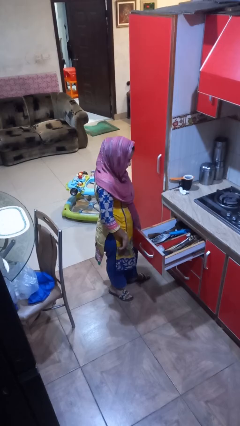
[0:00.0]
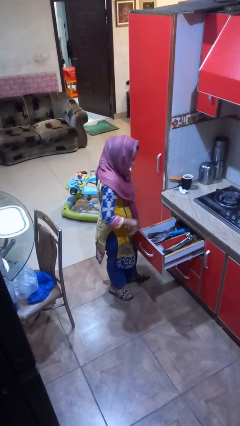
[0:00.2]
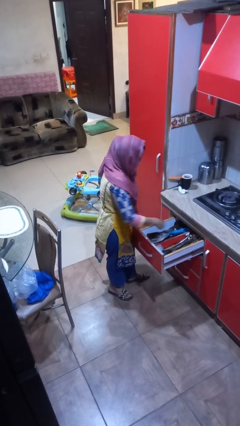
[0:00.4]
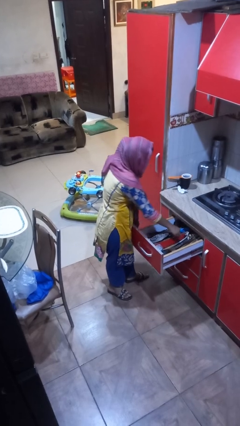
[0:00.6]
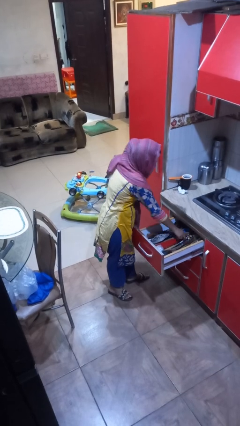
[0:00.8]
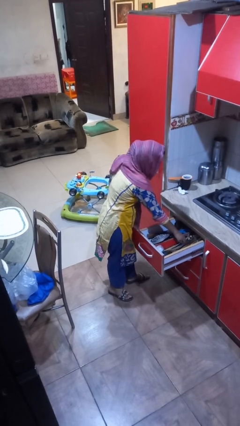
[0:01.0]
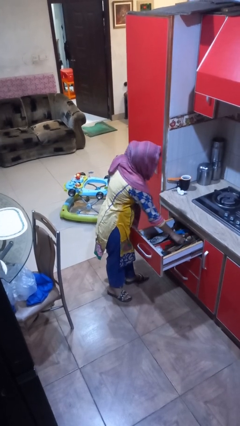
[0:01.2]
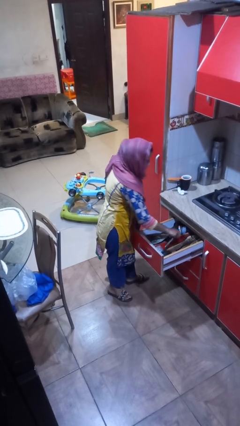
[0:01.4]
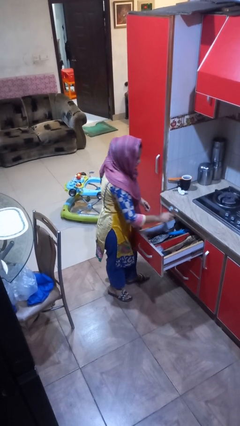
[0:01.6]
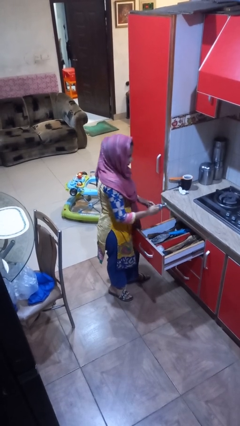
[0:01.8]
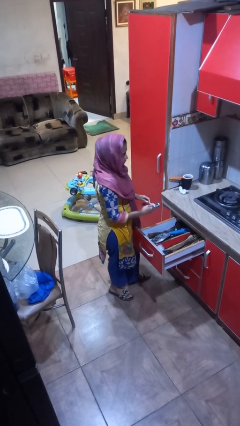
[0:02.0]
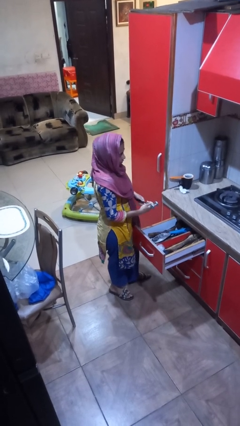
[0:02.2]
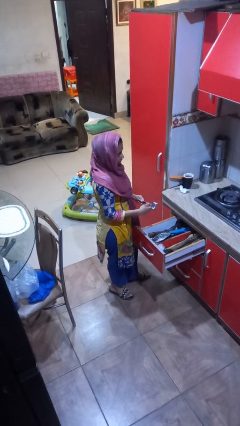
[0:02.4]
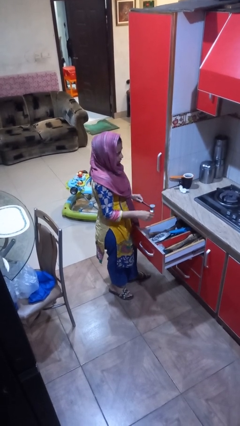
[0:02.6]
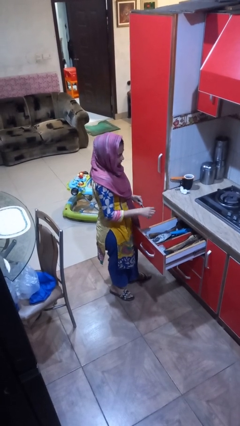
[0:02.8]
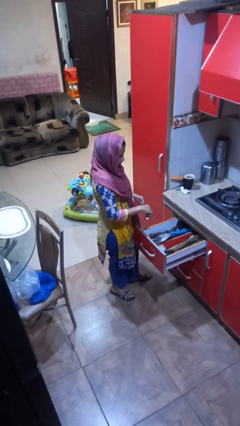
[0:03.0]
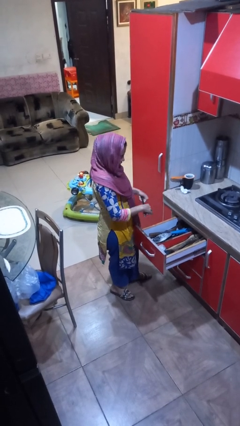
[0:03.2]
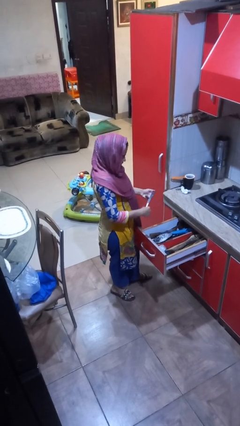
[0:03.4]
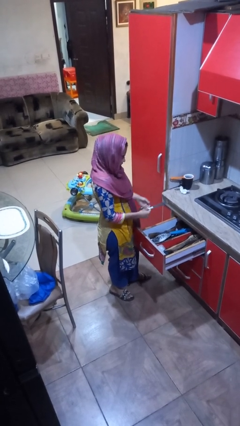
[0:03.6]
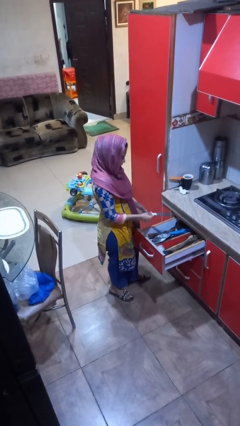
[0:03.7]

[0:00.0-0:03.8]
person takes object from kitchen drawer

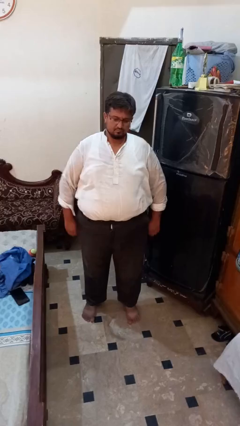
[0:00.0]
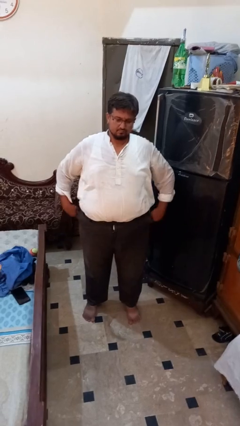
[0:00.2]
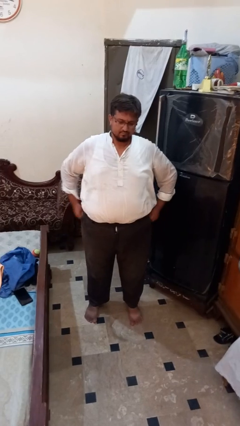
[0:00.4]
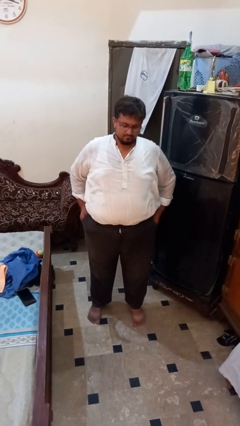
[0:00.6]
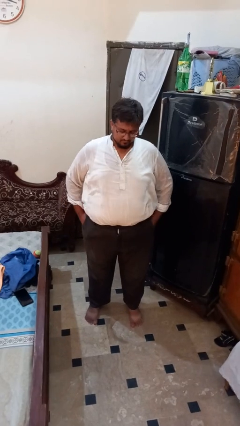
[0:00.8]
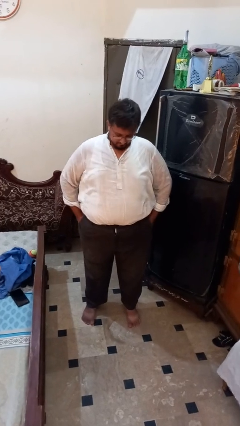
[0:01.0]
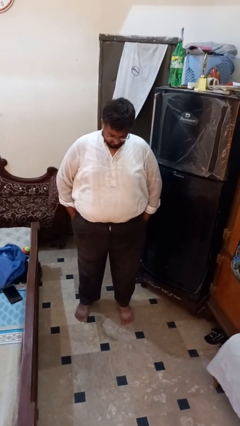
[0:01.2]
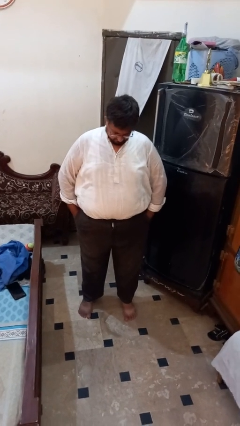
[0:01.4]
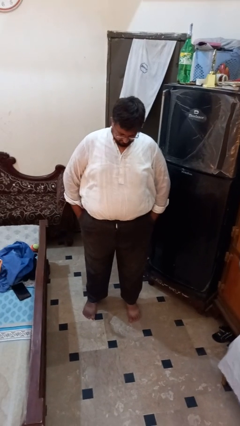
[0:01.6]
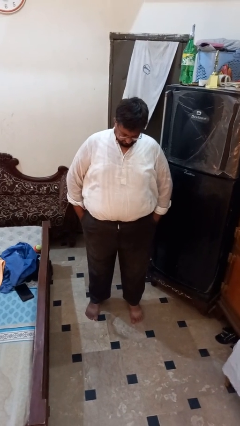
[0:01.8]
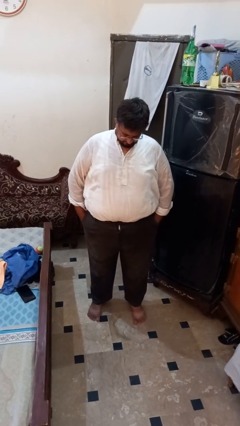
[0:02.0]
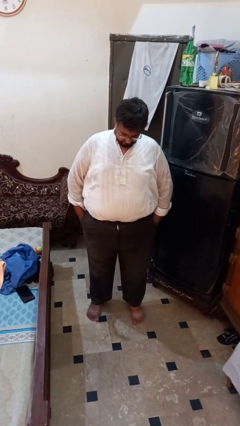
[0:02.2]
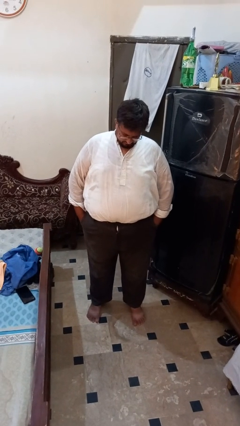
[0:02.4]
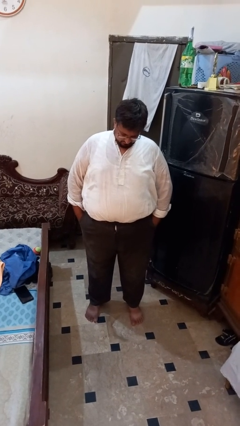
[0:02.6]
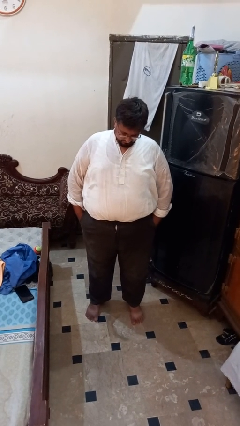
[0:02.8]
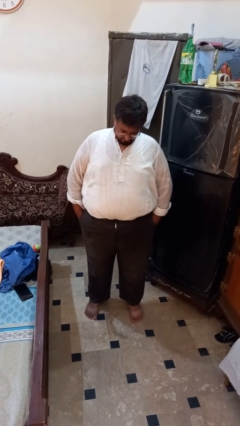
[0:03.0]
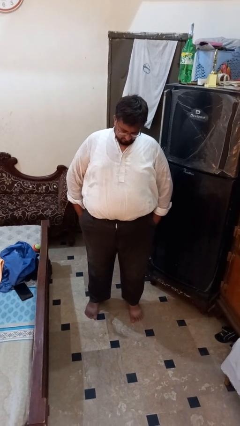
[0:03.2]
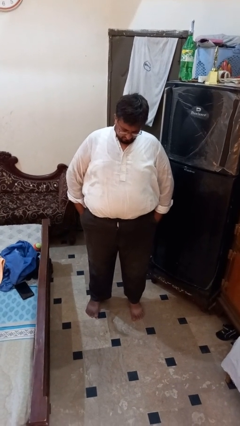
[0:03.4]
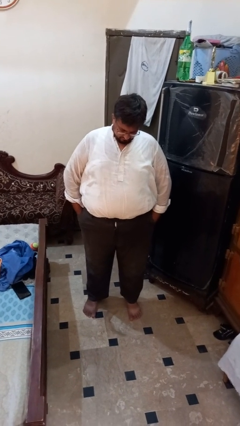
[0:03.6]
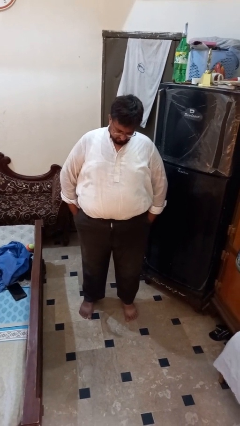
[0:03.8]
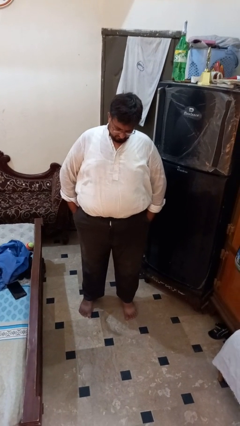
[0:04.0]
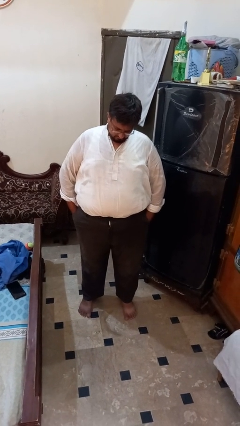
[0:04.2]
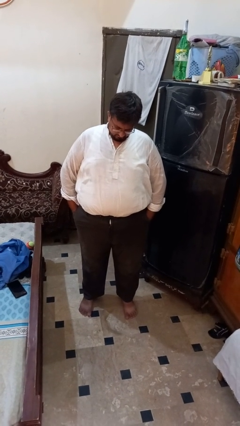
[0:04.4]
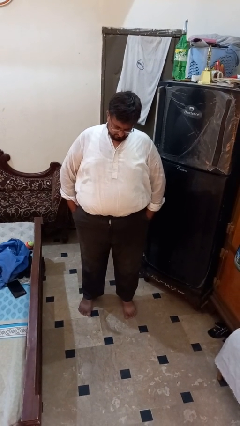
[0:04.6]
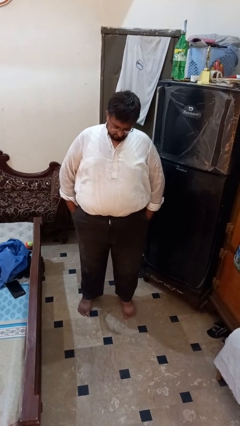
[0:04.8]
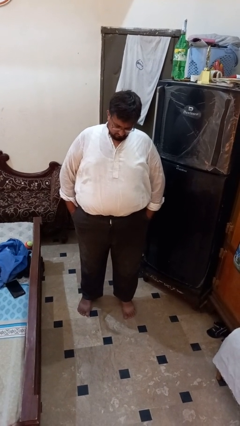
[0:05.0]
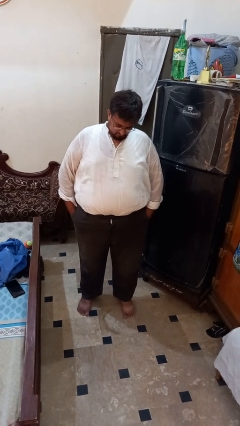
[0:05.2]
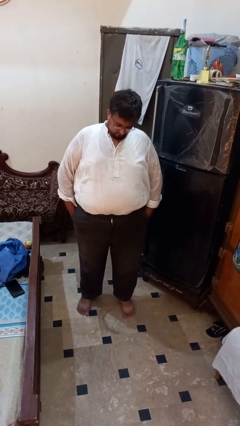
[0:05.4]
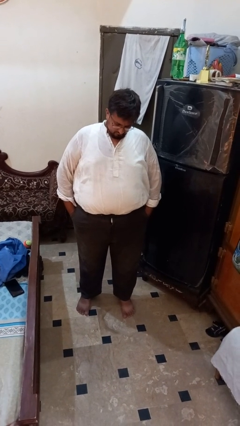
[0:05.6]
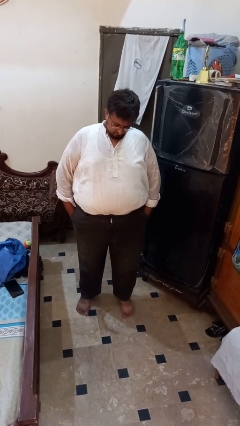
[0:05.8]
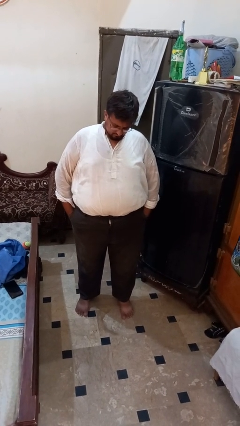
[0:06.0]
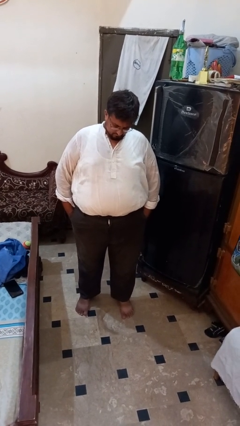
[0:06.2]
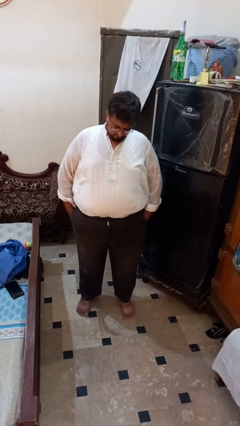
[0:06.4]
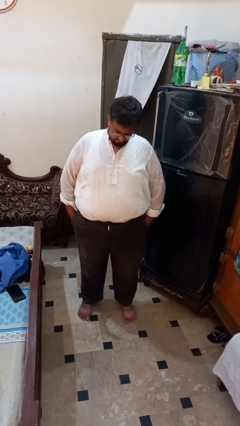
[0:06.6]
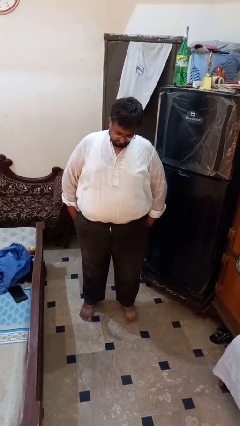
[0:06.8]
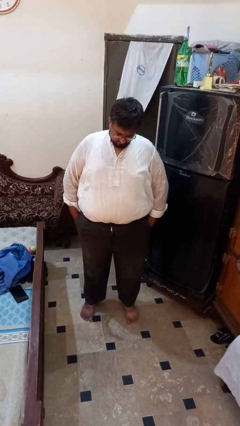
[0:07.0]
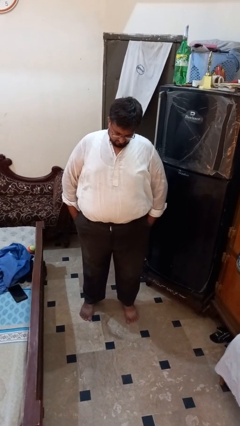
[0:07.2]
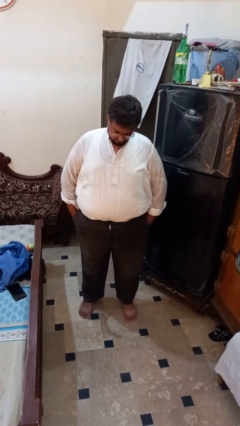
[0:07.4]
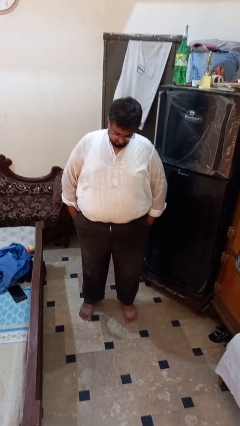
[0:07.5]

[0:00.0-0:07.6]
person puts hands in back pockets

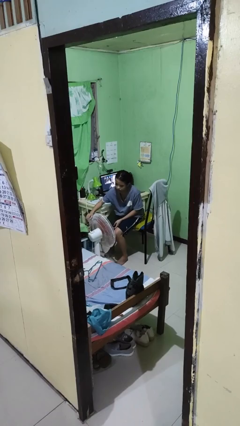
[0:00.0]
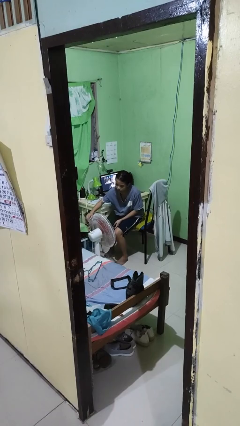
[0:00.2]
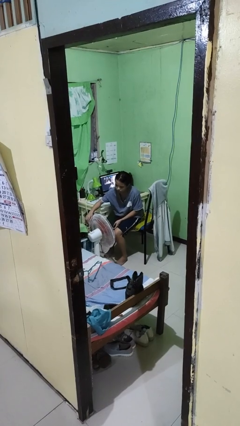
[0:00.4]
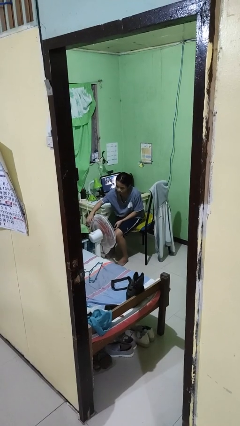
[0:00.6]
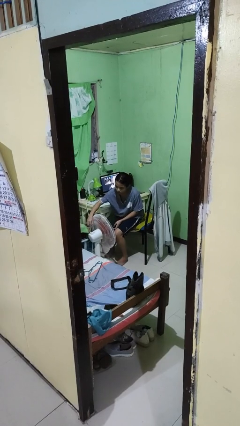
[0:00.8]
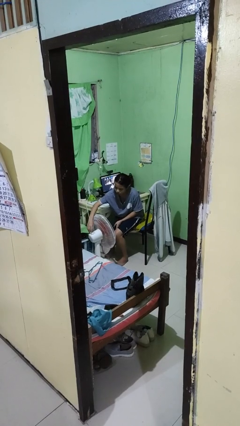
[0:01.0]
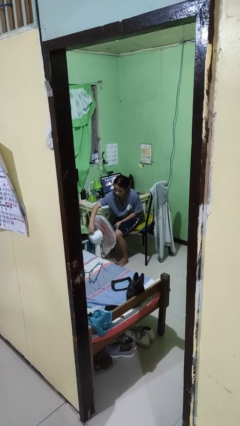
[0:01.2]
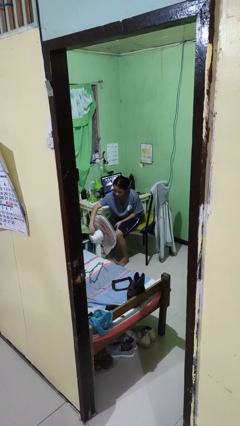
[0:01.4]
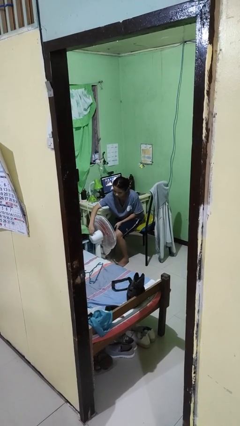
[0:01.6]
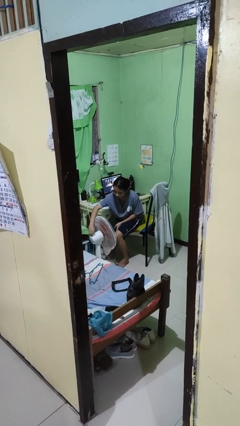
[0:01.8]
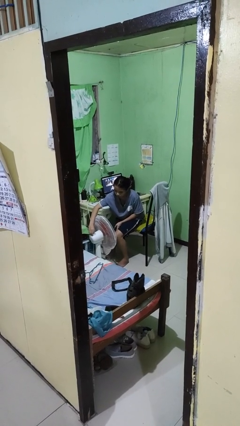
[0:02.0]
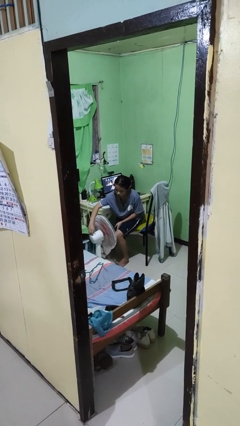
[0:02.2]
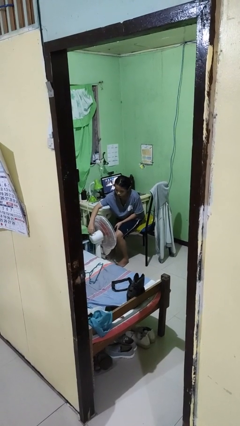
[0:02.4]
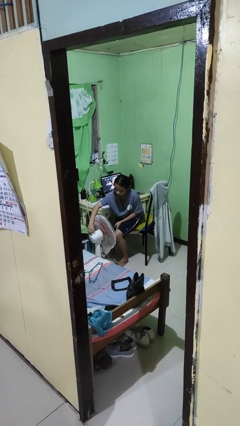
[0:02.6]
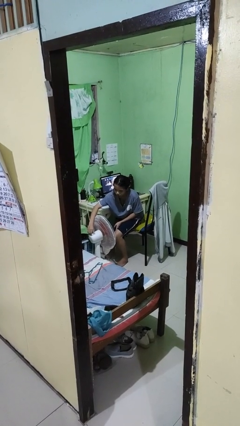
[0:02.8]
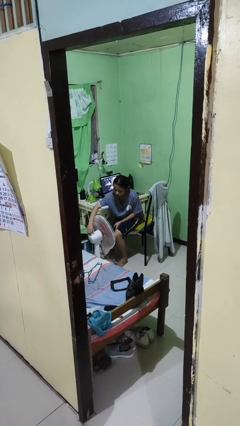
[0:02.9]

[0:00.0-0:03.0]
person turns on fan

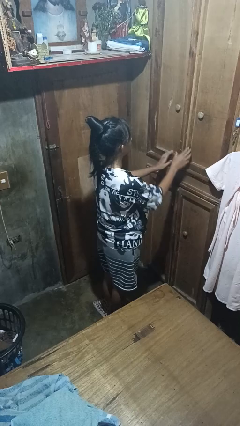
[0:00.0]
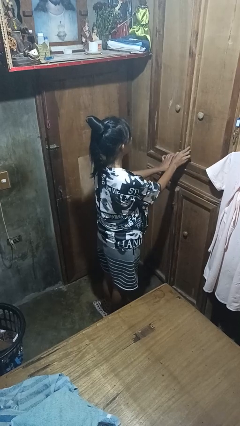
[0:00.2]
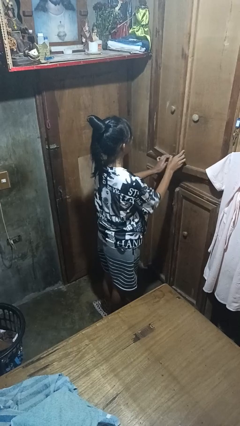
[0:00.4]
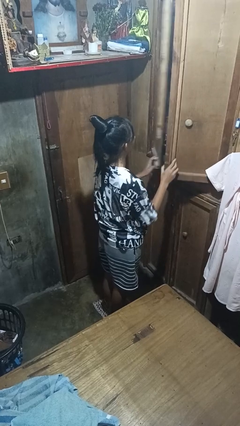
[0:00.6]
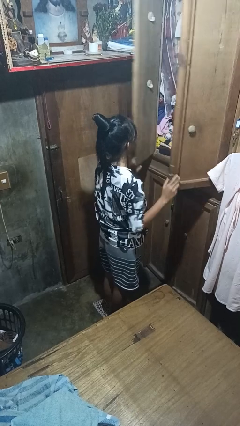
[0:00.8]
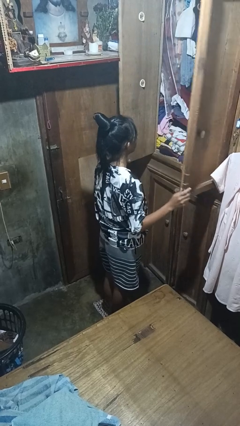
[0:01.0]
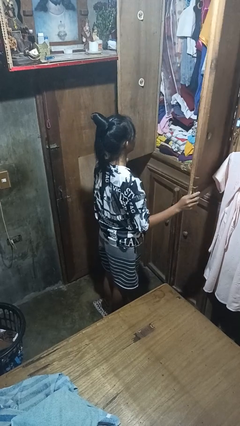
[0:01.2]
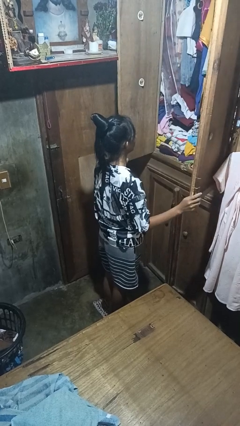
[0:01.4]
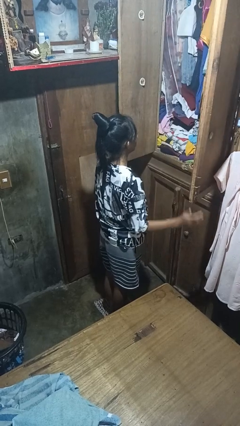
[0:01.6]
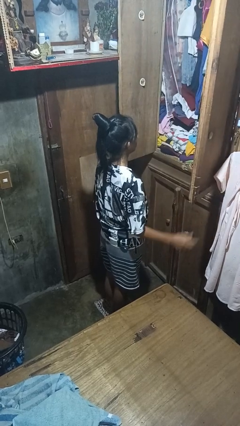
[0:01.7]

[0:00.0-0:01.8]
person opens closet door

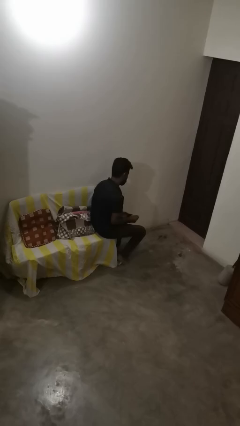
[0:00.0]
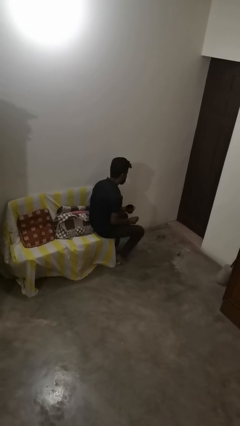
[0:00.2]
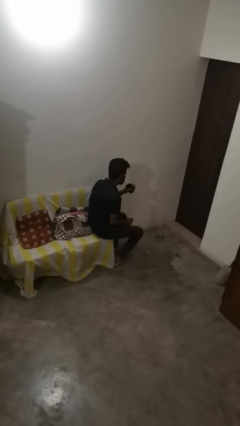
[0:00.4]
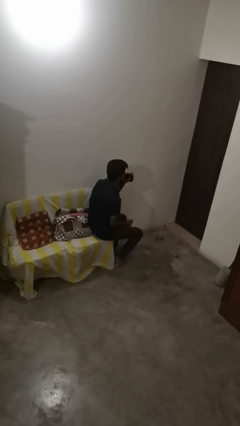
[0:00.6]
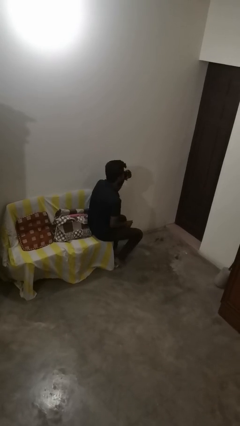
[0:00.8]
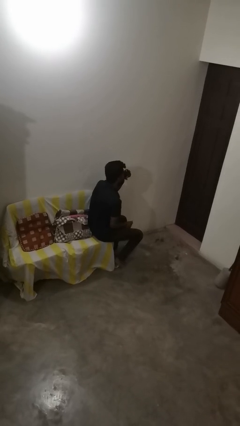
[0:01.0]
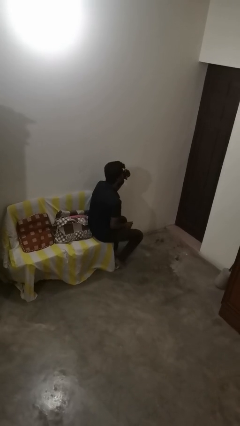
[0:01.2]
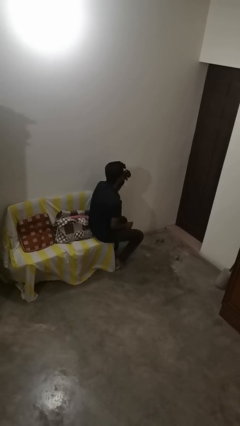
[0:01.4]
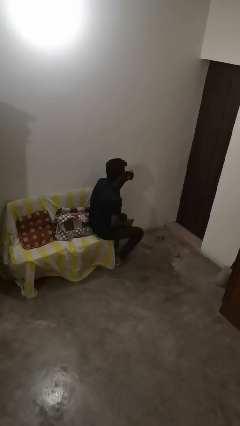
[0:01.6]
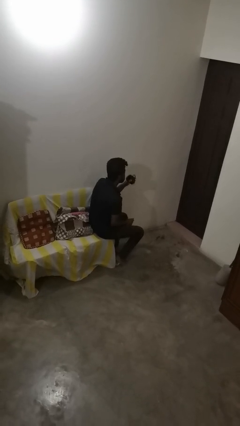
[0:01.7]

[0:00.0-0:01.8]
person drinks from mug
